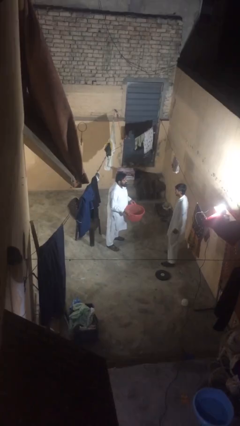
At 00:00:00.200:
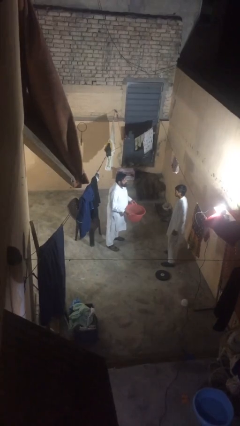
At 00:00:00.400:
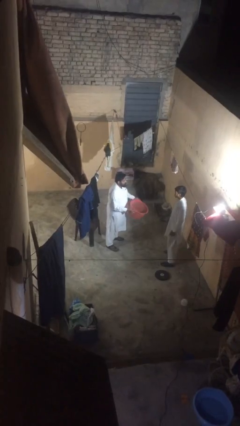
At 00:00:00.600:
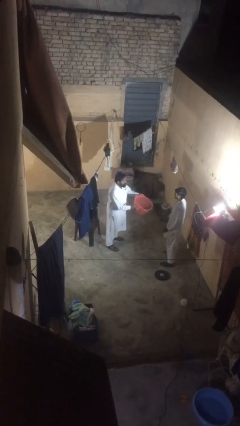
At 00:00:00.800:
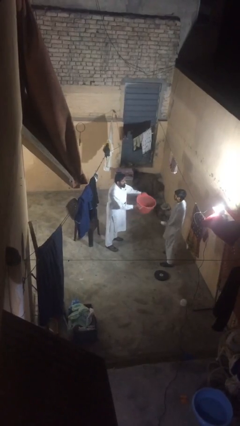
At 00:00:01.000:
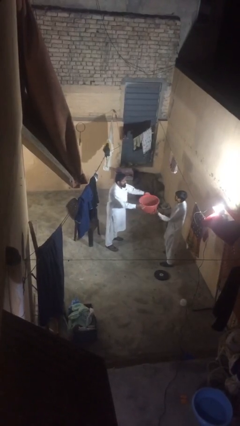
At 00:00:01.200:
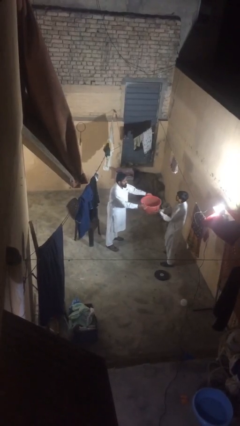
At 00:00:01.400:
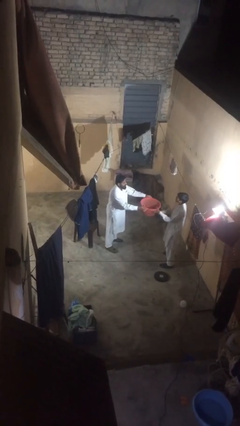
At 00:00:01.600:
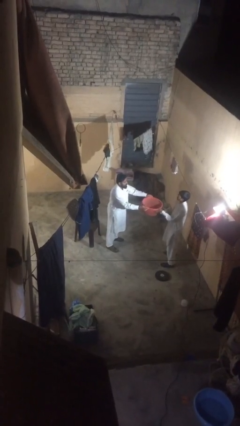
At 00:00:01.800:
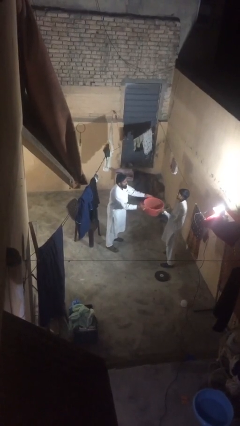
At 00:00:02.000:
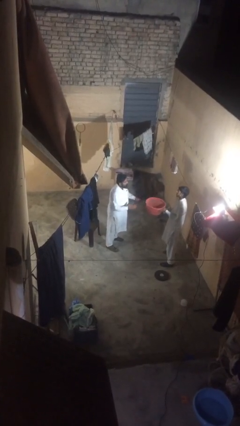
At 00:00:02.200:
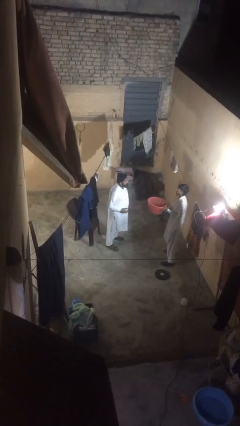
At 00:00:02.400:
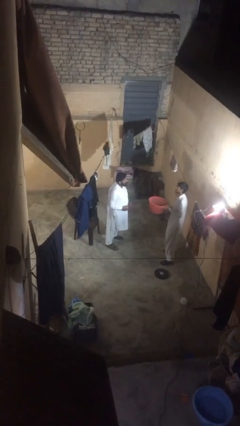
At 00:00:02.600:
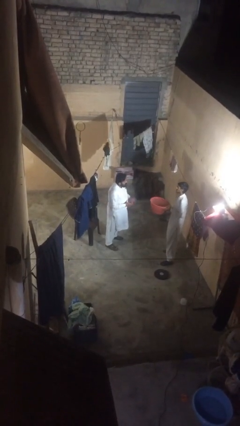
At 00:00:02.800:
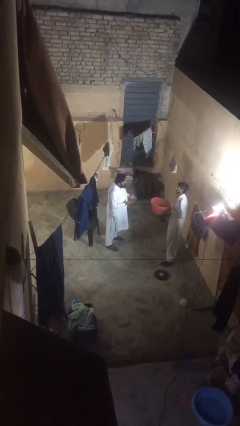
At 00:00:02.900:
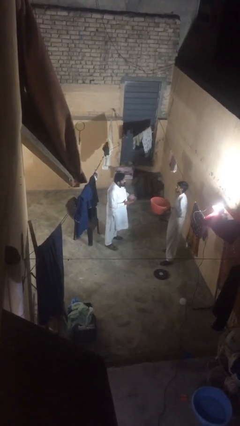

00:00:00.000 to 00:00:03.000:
person transfers object to person

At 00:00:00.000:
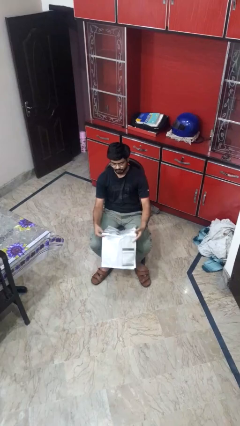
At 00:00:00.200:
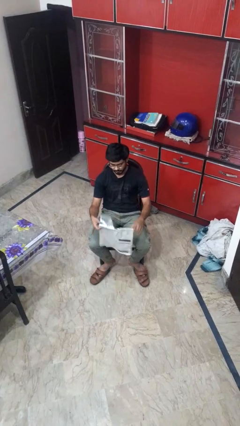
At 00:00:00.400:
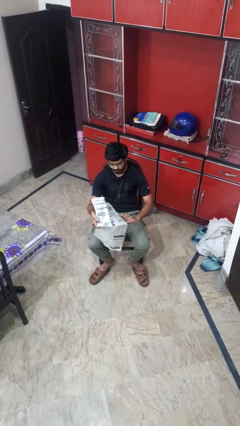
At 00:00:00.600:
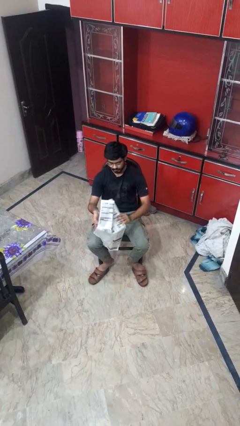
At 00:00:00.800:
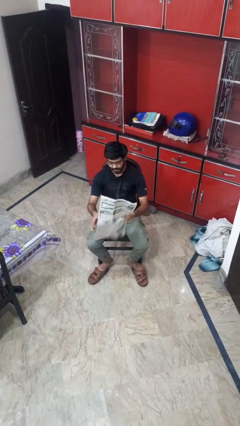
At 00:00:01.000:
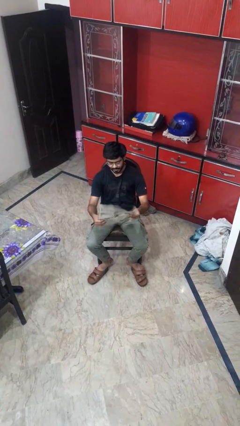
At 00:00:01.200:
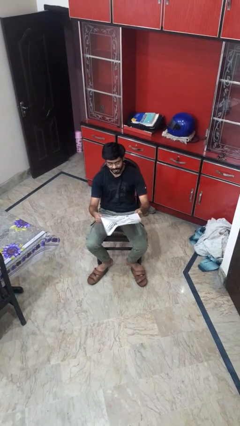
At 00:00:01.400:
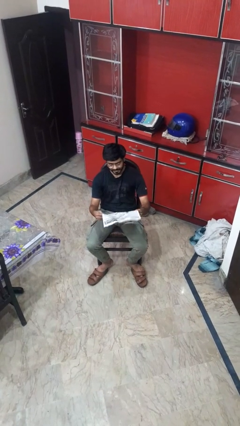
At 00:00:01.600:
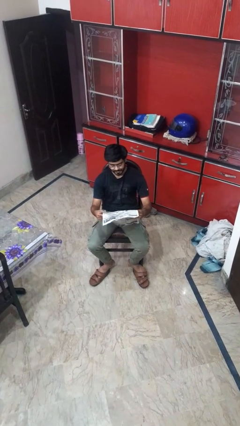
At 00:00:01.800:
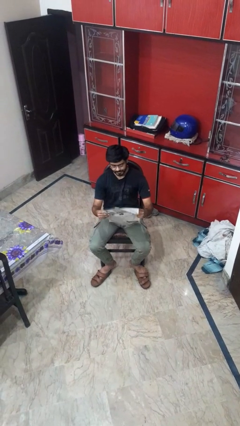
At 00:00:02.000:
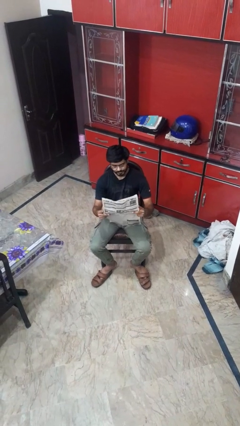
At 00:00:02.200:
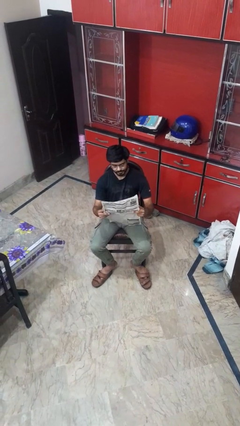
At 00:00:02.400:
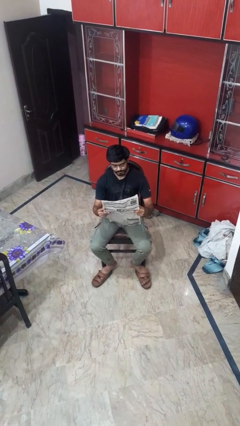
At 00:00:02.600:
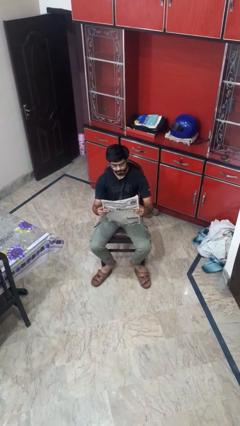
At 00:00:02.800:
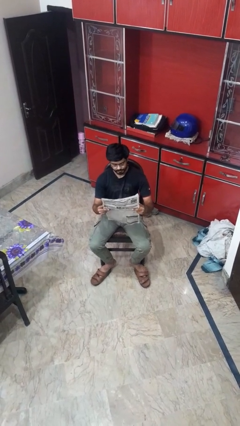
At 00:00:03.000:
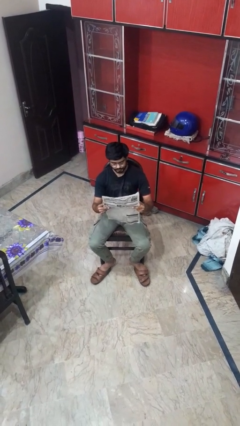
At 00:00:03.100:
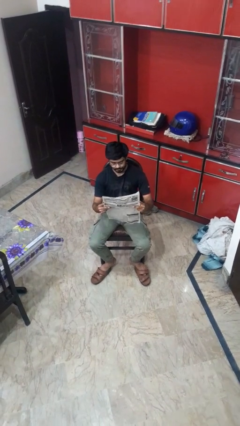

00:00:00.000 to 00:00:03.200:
person reads newspaper

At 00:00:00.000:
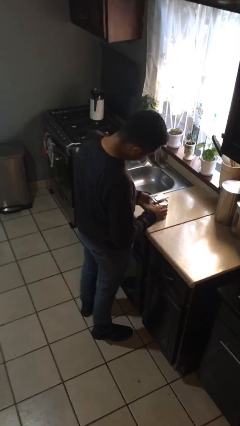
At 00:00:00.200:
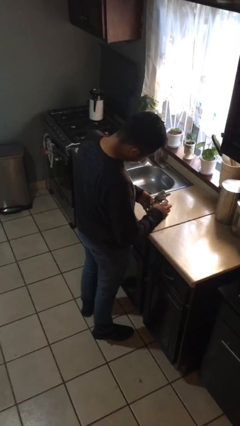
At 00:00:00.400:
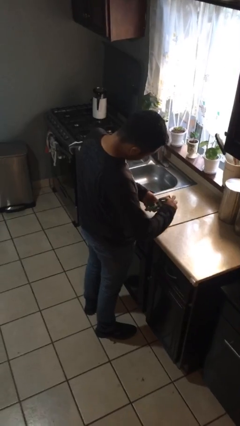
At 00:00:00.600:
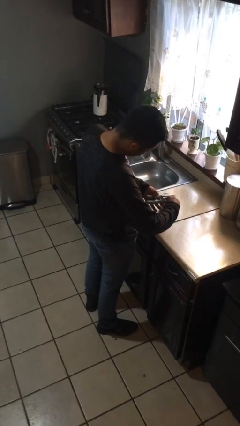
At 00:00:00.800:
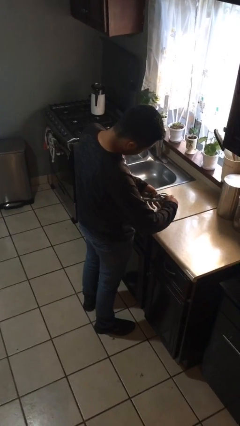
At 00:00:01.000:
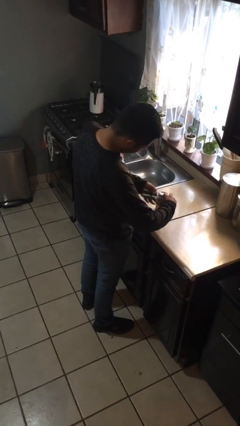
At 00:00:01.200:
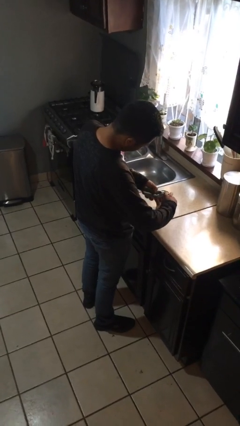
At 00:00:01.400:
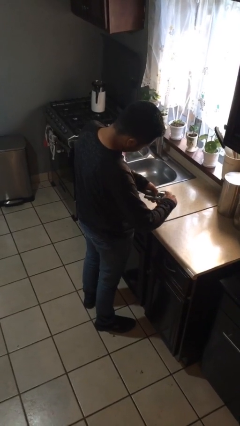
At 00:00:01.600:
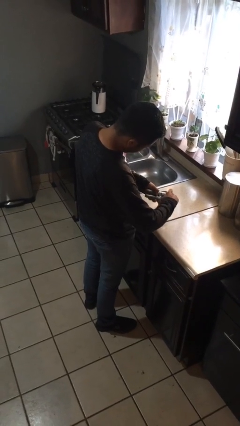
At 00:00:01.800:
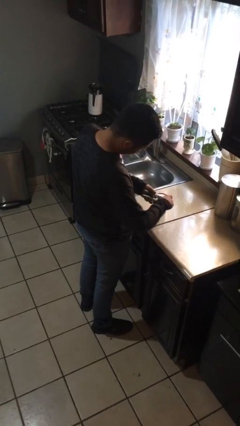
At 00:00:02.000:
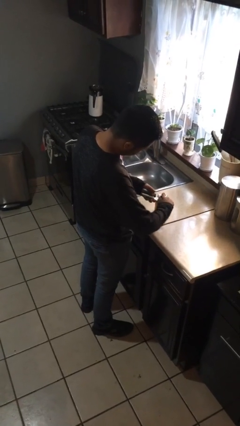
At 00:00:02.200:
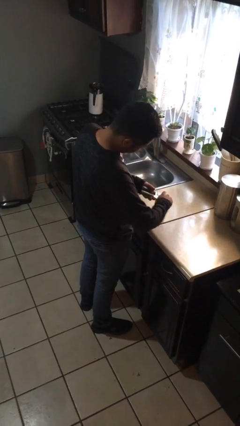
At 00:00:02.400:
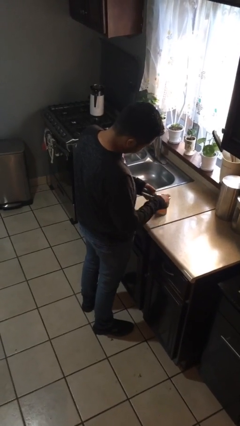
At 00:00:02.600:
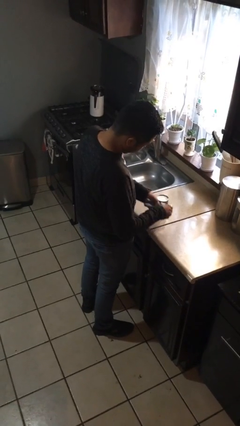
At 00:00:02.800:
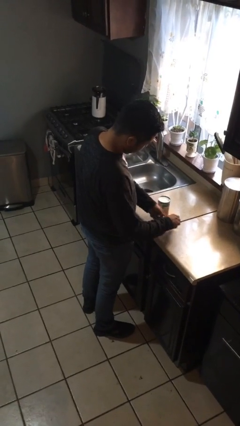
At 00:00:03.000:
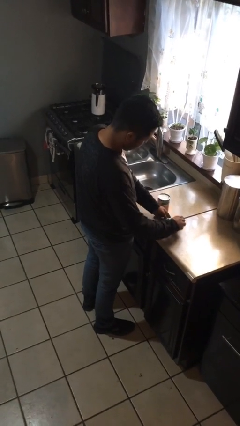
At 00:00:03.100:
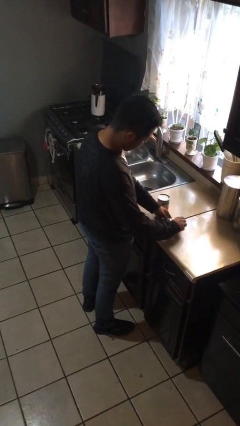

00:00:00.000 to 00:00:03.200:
person opens can with can opener

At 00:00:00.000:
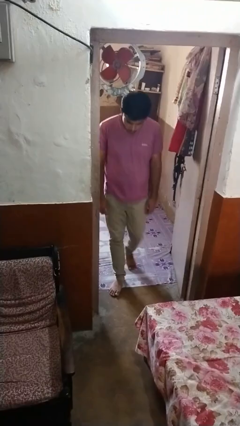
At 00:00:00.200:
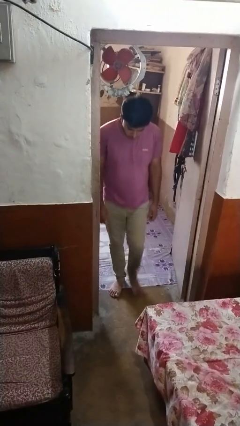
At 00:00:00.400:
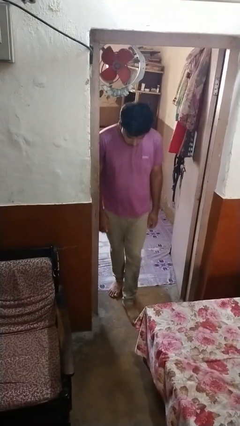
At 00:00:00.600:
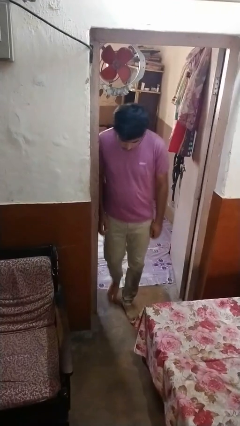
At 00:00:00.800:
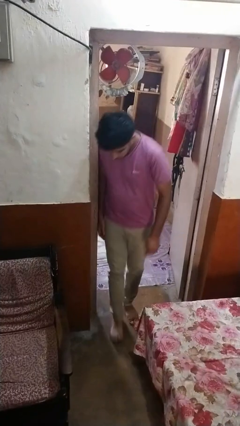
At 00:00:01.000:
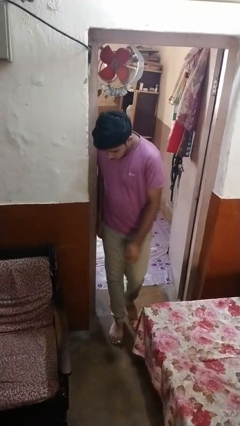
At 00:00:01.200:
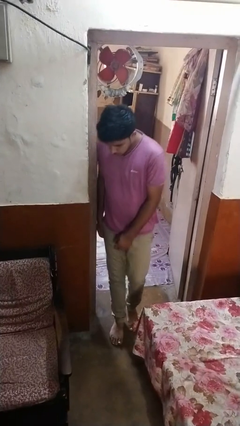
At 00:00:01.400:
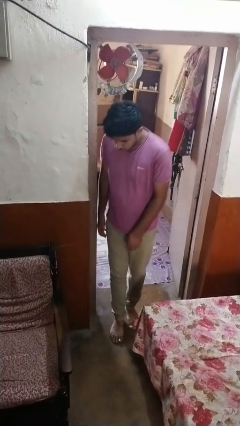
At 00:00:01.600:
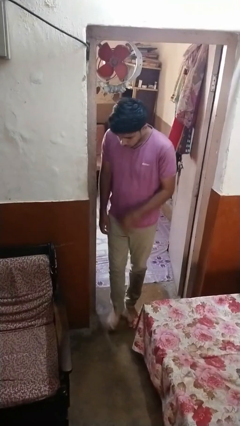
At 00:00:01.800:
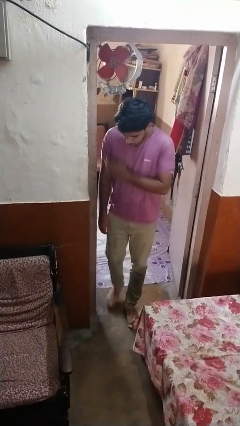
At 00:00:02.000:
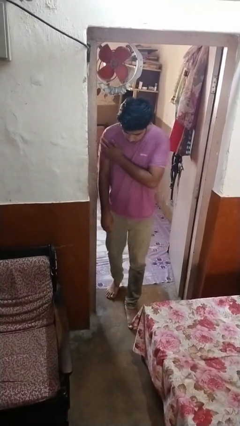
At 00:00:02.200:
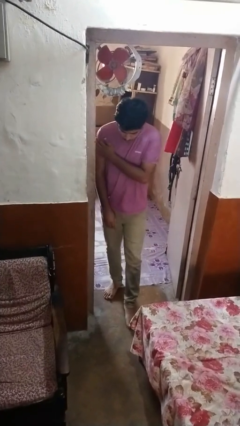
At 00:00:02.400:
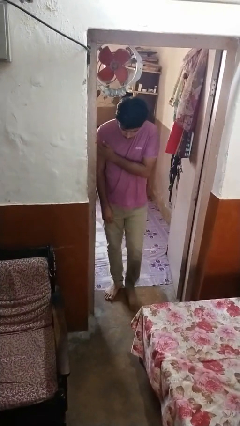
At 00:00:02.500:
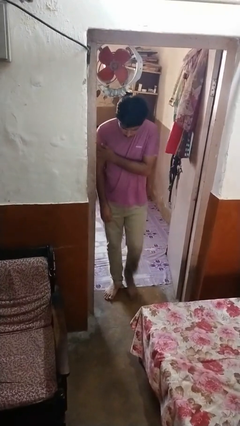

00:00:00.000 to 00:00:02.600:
person bumps into wall

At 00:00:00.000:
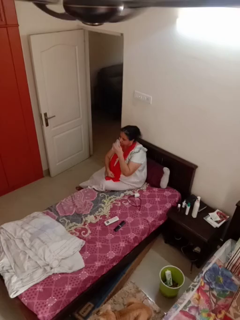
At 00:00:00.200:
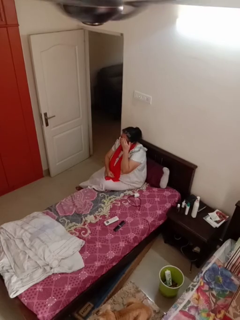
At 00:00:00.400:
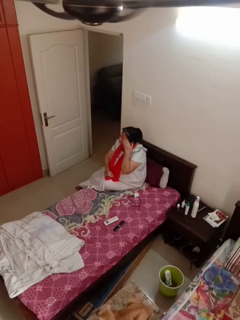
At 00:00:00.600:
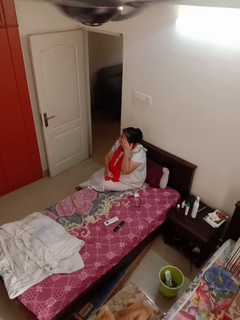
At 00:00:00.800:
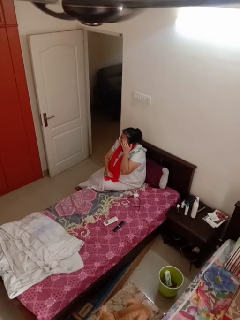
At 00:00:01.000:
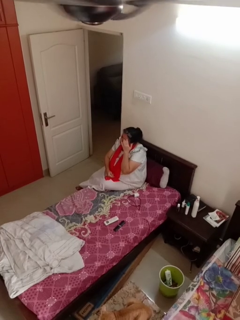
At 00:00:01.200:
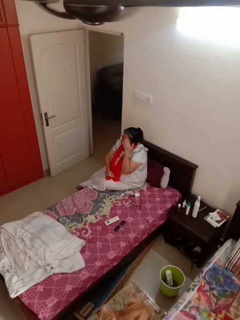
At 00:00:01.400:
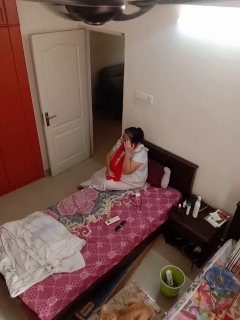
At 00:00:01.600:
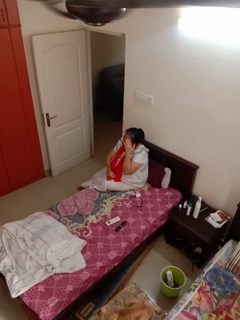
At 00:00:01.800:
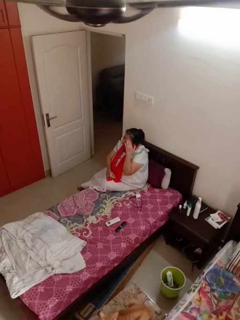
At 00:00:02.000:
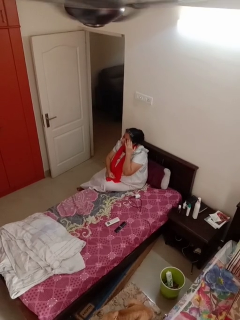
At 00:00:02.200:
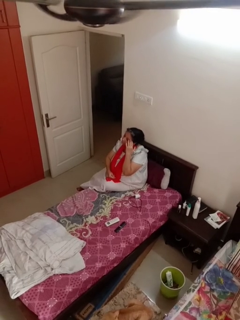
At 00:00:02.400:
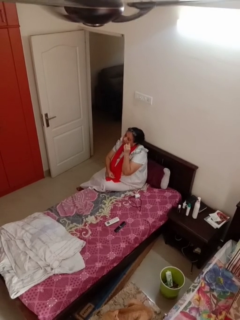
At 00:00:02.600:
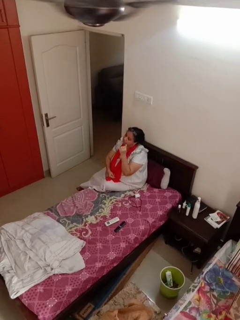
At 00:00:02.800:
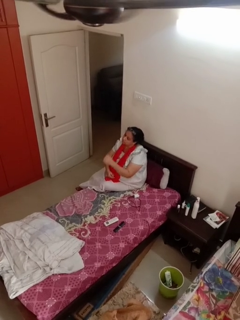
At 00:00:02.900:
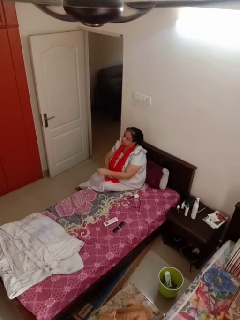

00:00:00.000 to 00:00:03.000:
person scratches face

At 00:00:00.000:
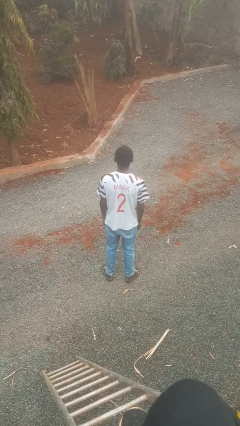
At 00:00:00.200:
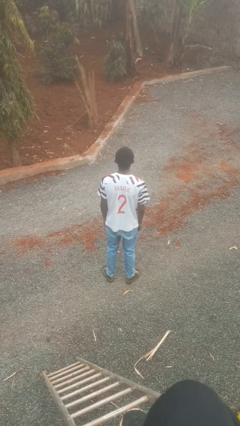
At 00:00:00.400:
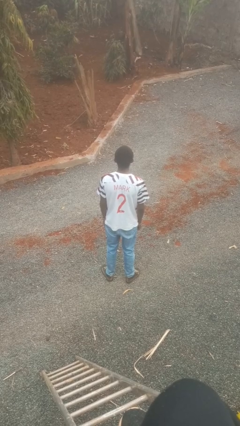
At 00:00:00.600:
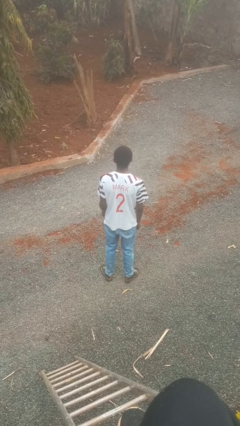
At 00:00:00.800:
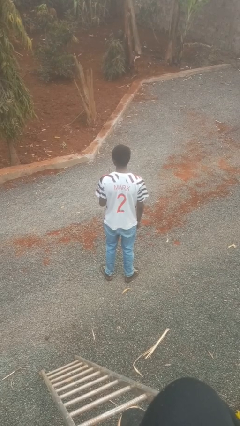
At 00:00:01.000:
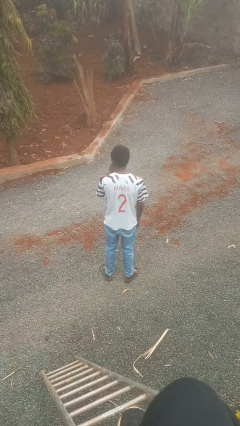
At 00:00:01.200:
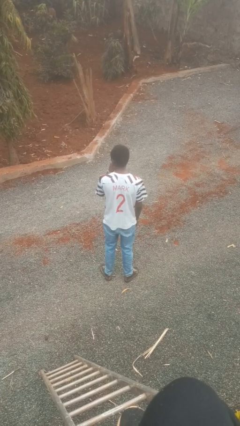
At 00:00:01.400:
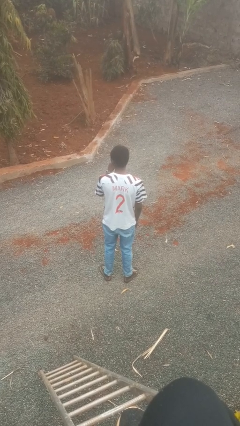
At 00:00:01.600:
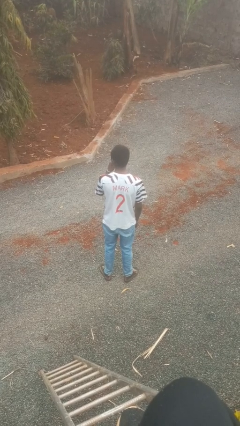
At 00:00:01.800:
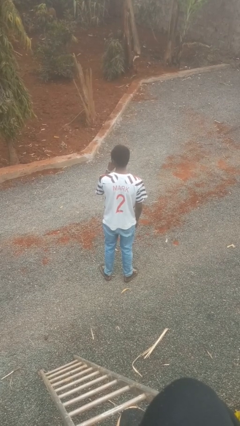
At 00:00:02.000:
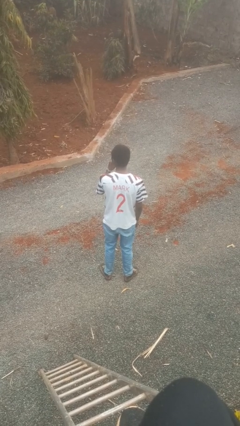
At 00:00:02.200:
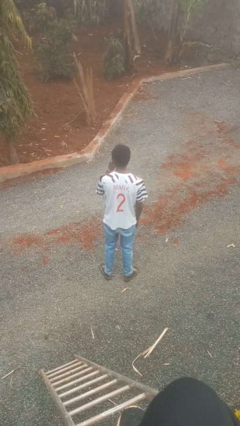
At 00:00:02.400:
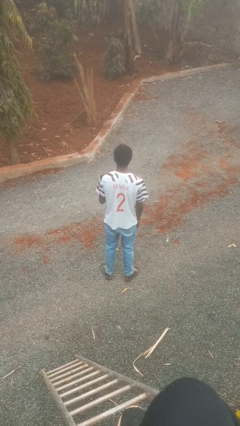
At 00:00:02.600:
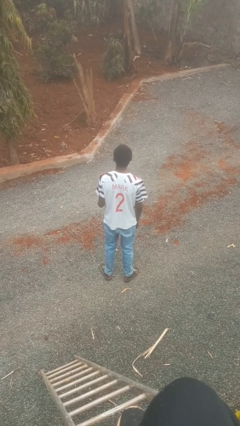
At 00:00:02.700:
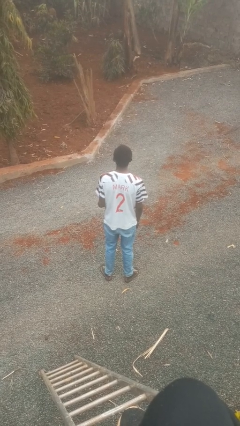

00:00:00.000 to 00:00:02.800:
person gestures be quiet
